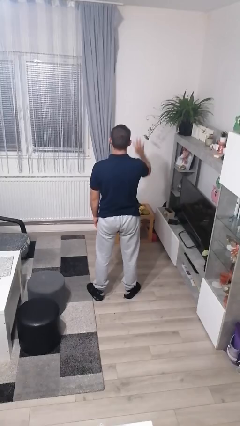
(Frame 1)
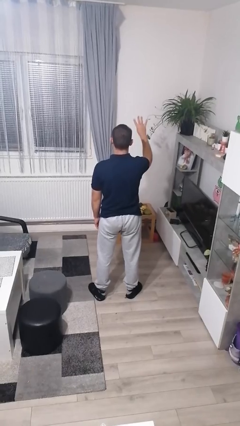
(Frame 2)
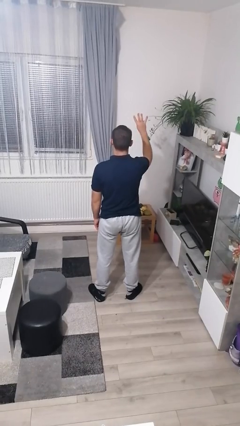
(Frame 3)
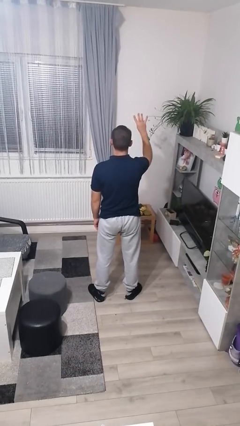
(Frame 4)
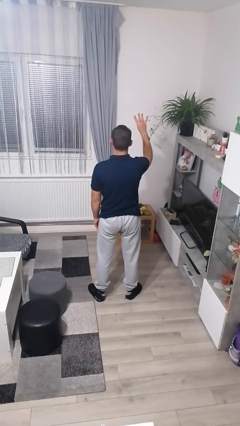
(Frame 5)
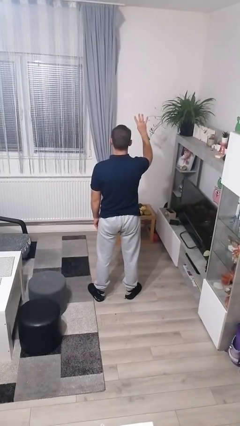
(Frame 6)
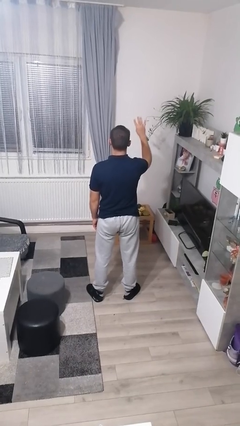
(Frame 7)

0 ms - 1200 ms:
person gestures number four

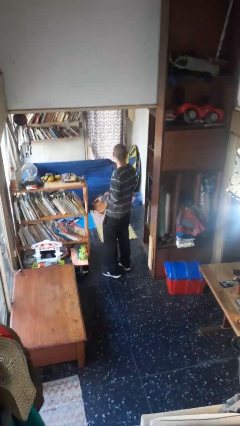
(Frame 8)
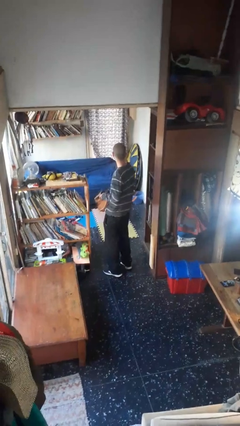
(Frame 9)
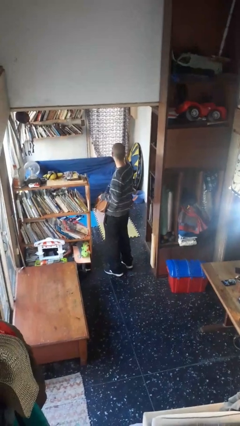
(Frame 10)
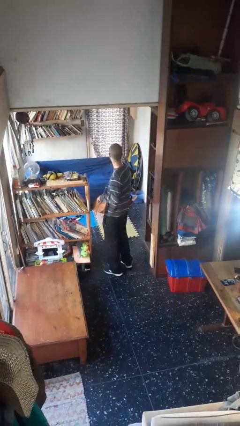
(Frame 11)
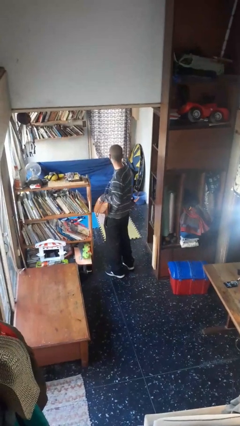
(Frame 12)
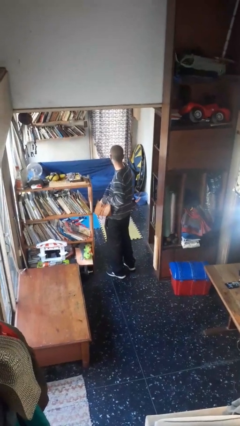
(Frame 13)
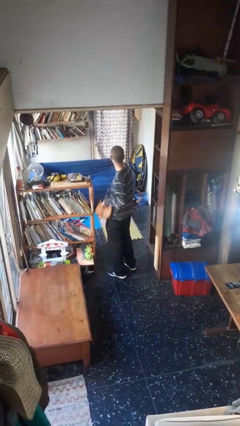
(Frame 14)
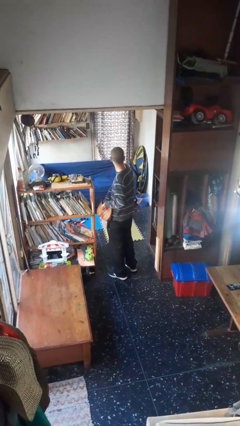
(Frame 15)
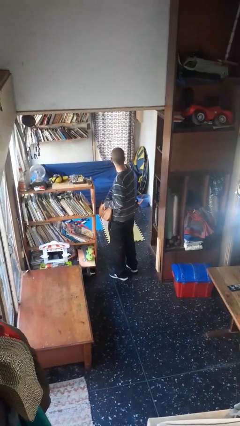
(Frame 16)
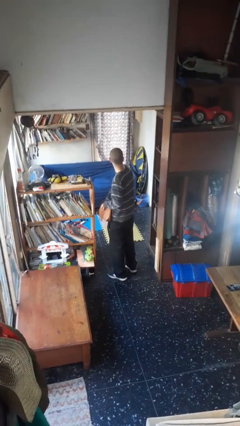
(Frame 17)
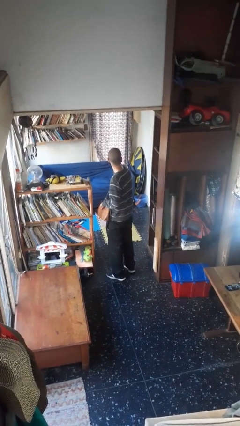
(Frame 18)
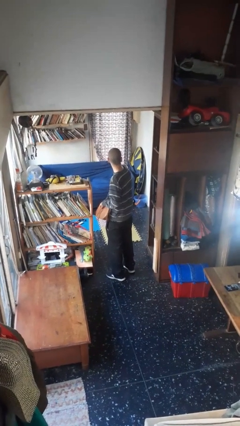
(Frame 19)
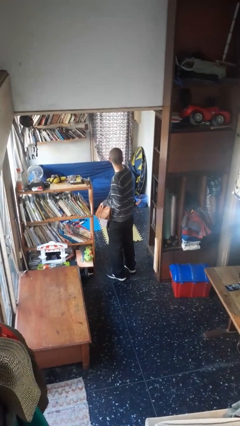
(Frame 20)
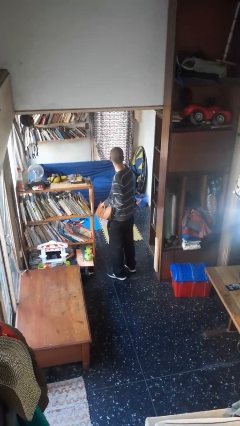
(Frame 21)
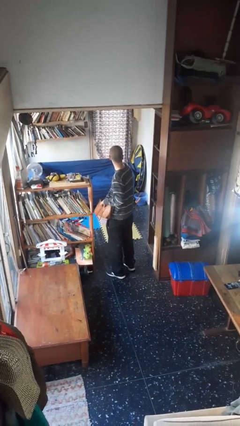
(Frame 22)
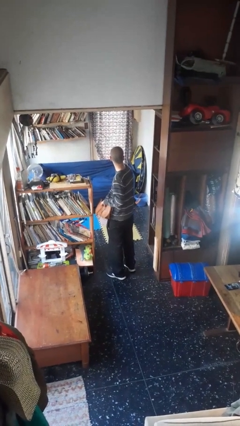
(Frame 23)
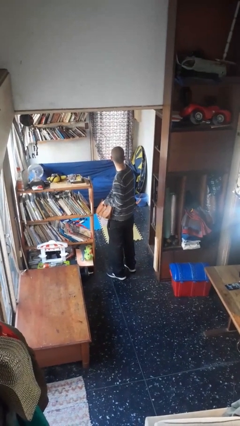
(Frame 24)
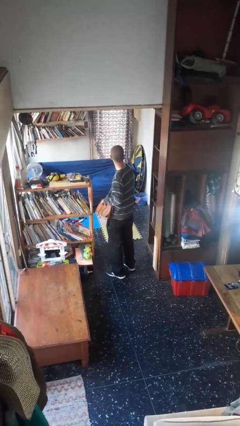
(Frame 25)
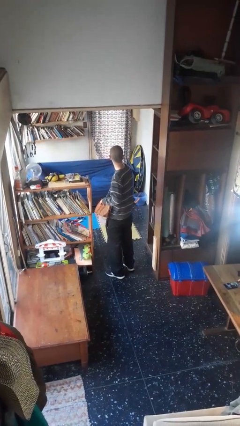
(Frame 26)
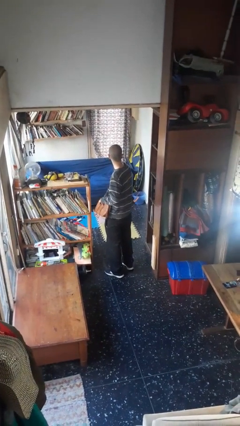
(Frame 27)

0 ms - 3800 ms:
person searches in purse

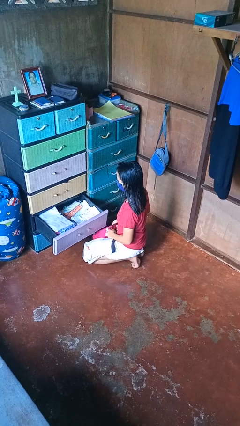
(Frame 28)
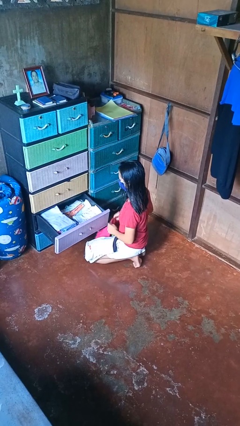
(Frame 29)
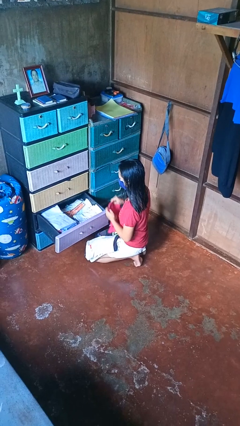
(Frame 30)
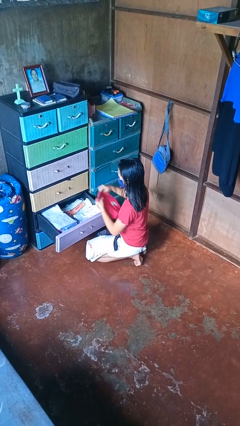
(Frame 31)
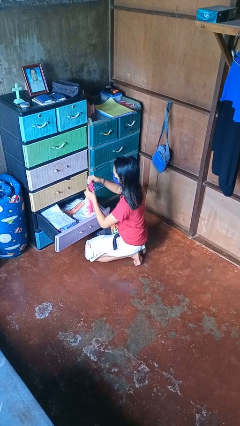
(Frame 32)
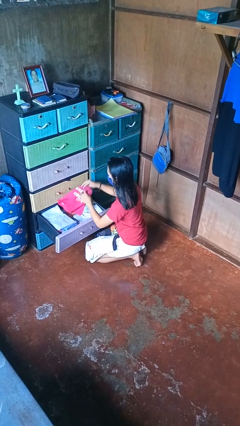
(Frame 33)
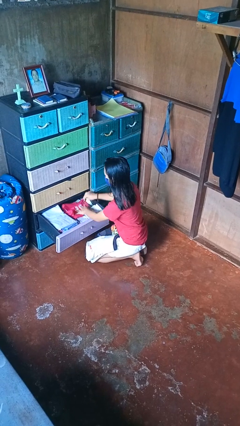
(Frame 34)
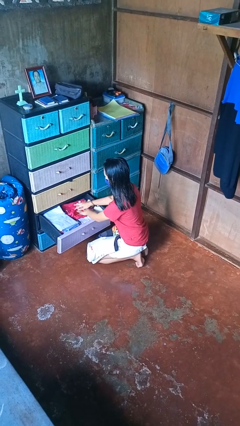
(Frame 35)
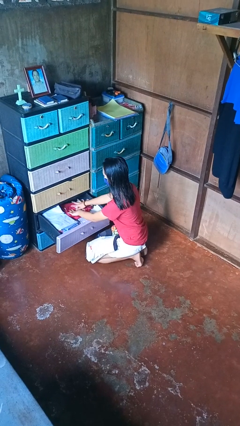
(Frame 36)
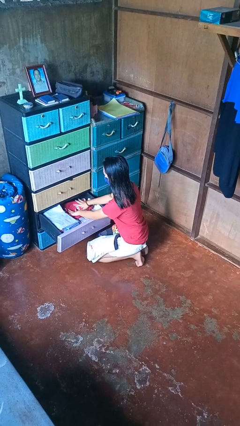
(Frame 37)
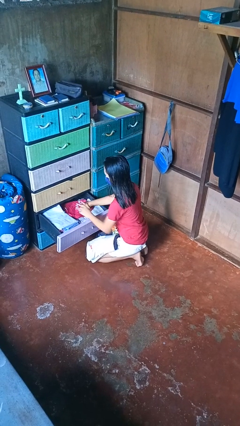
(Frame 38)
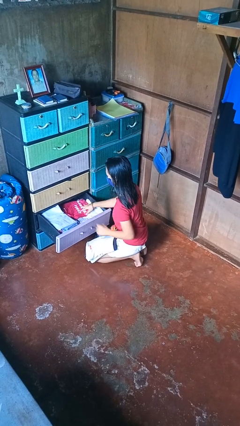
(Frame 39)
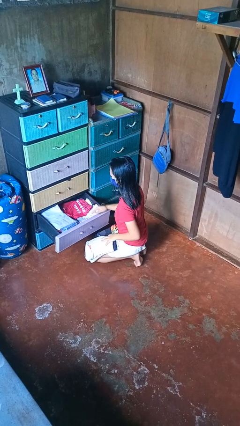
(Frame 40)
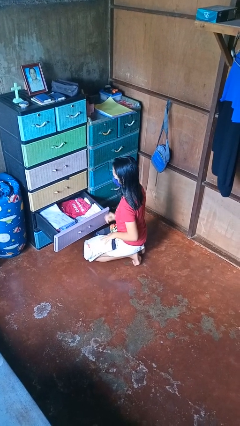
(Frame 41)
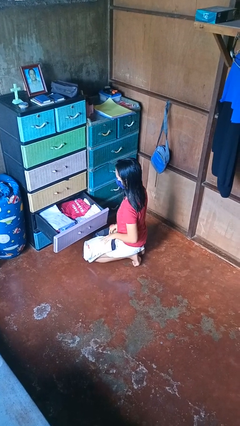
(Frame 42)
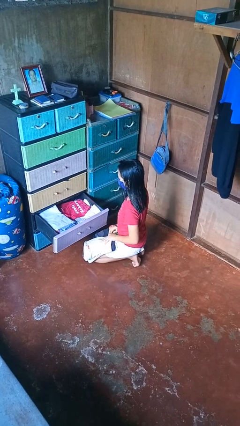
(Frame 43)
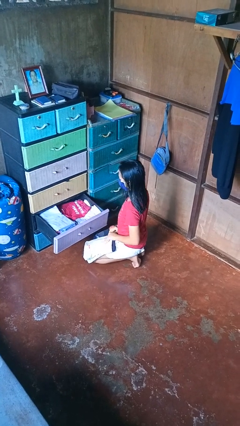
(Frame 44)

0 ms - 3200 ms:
person puts clothes into dresser

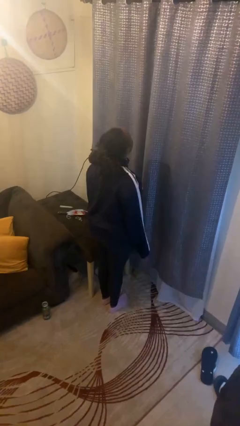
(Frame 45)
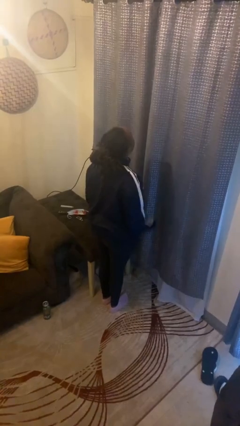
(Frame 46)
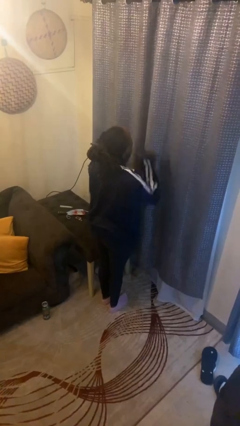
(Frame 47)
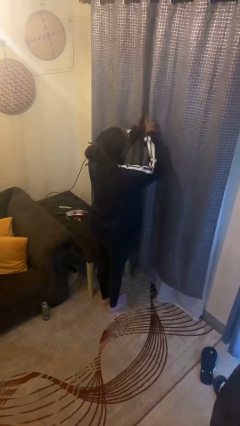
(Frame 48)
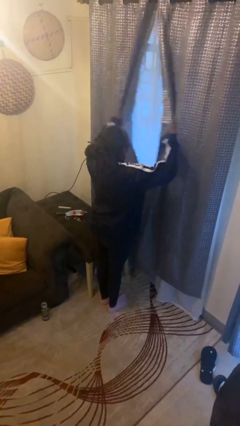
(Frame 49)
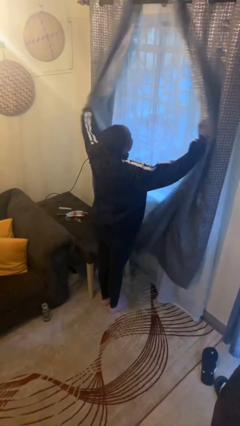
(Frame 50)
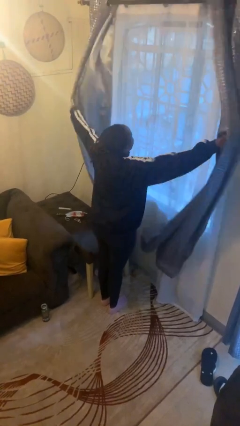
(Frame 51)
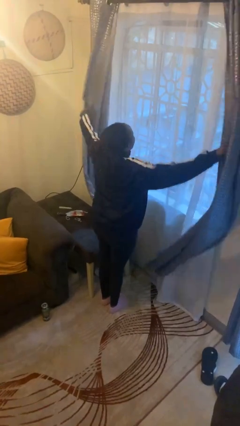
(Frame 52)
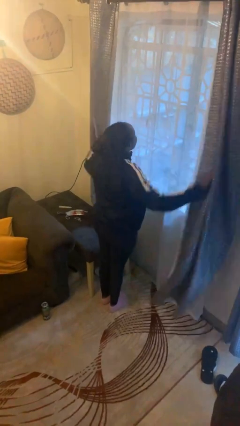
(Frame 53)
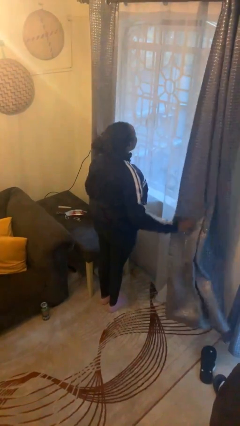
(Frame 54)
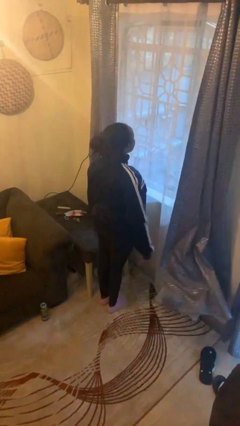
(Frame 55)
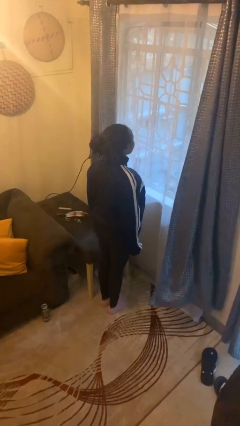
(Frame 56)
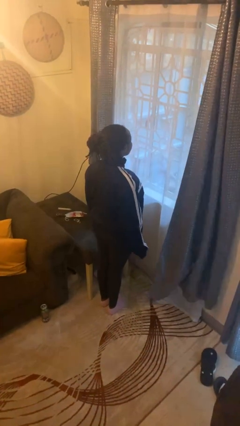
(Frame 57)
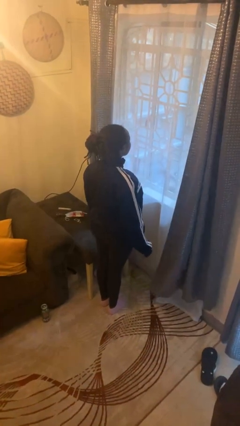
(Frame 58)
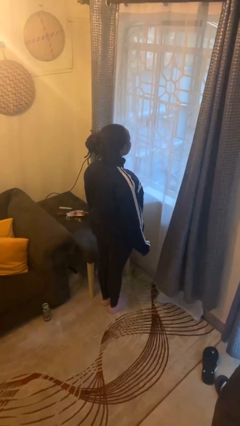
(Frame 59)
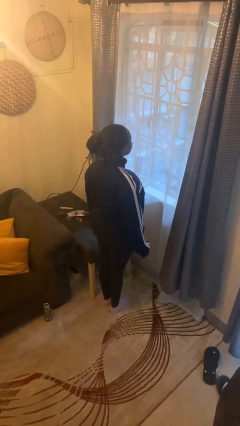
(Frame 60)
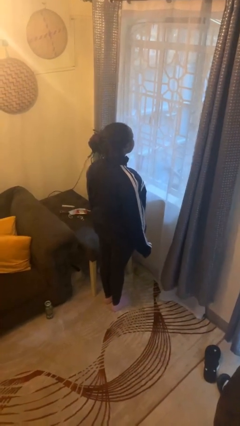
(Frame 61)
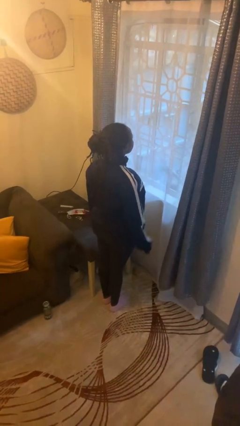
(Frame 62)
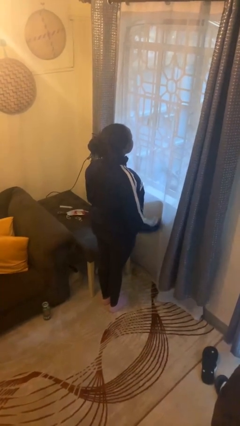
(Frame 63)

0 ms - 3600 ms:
person opens curtains

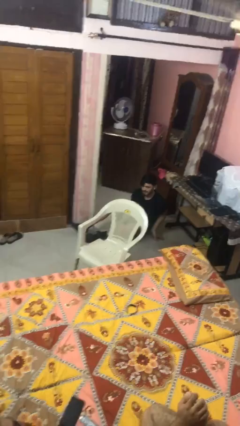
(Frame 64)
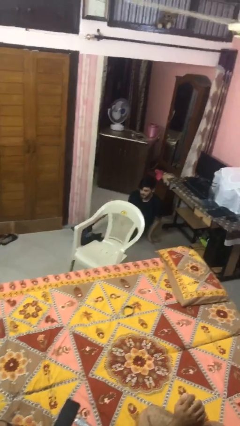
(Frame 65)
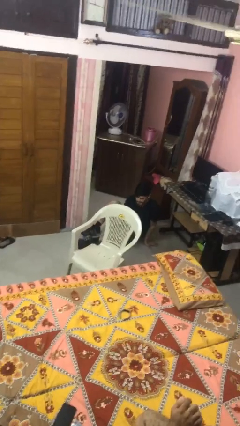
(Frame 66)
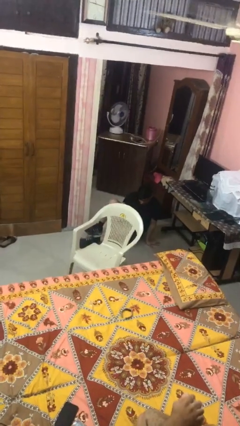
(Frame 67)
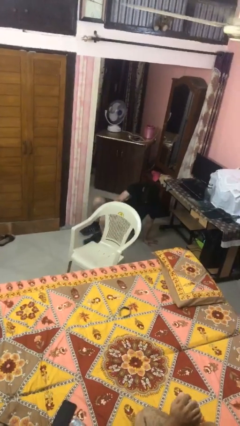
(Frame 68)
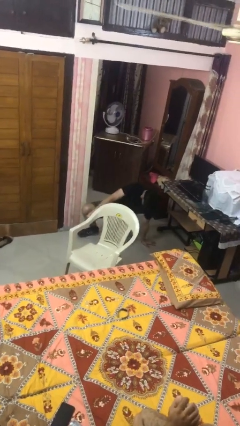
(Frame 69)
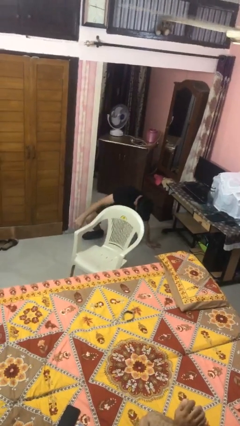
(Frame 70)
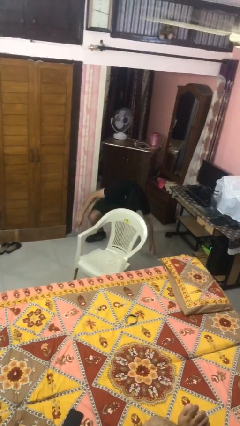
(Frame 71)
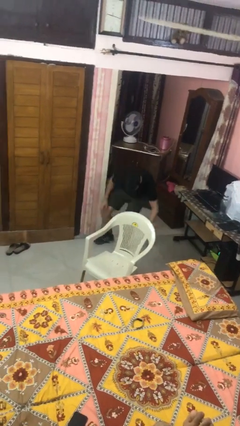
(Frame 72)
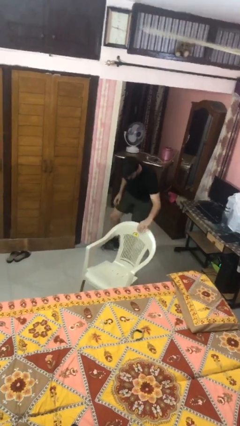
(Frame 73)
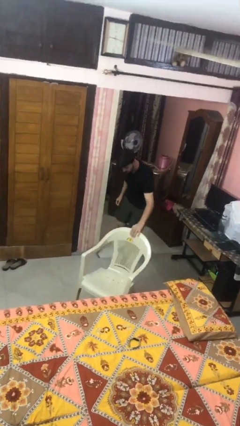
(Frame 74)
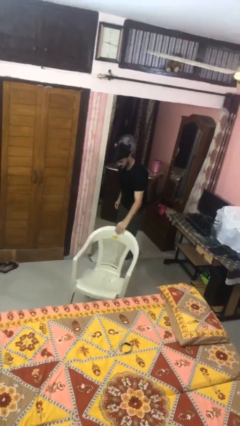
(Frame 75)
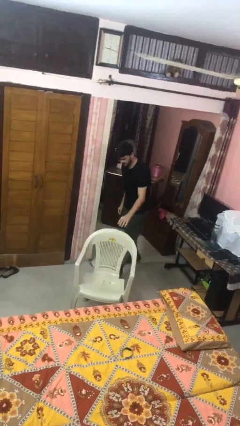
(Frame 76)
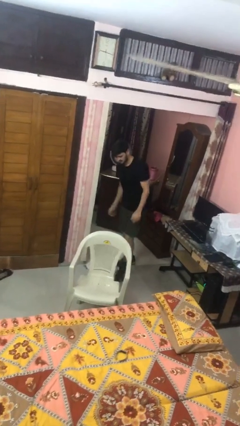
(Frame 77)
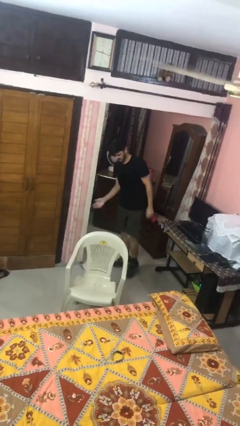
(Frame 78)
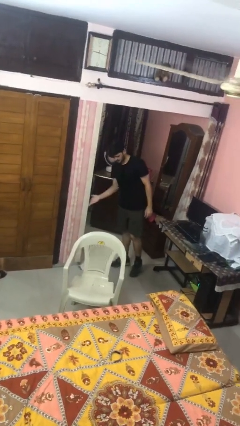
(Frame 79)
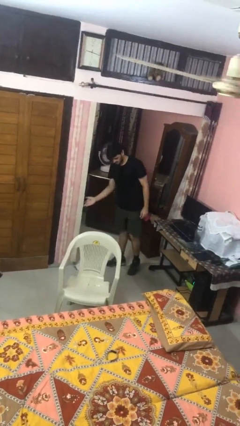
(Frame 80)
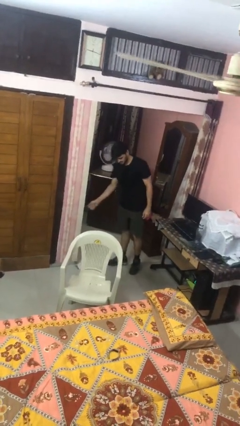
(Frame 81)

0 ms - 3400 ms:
person stands up from floor

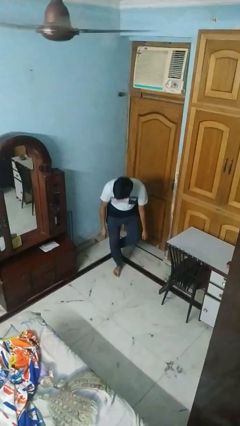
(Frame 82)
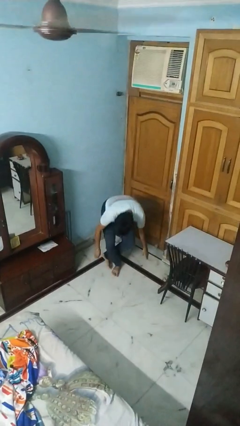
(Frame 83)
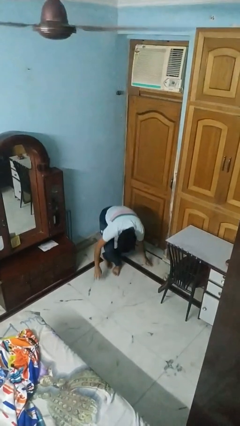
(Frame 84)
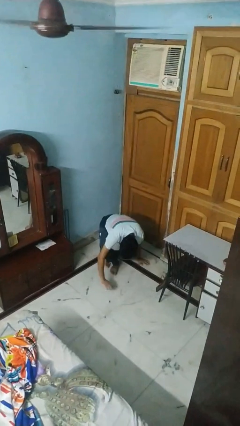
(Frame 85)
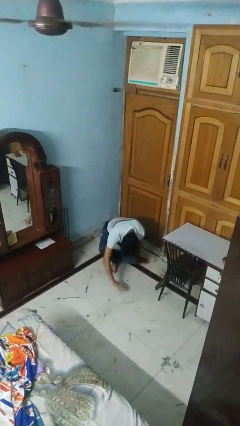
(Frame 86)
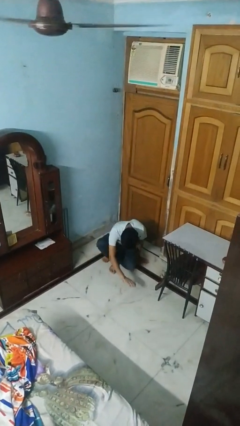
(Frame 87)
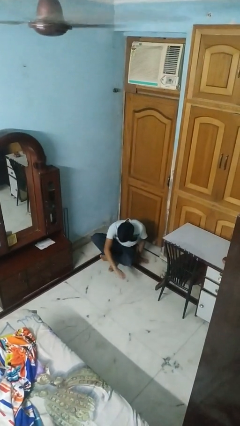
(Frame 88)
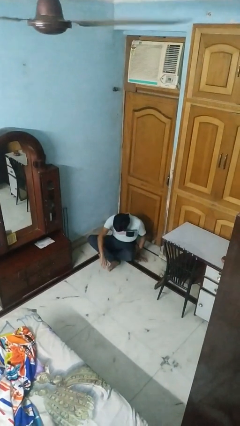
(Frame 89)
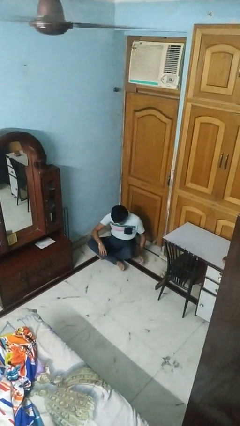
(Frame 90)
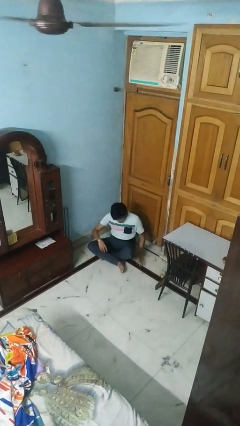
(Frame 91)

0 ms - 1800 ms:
person sits crisscross

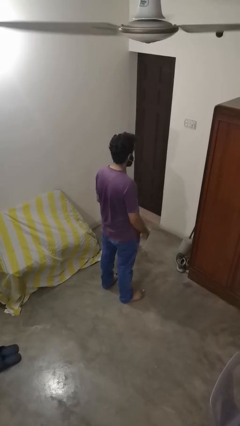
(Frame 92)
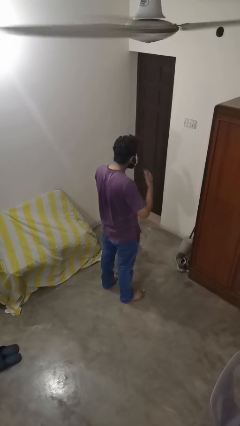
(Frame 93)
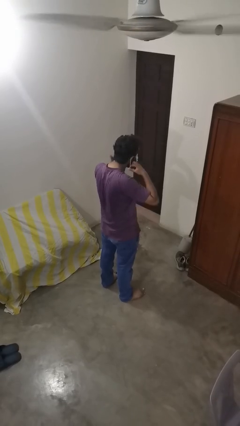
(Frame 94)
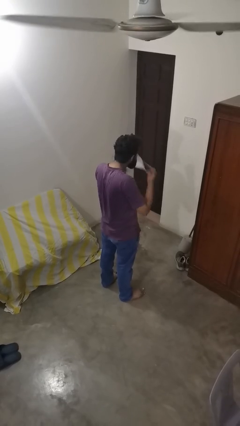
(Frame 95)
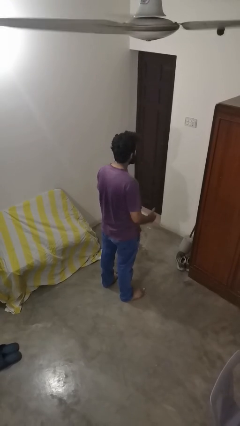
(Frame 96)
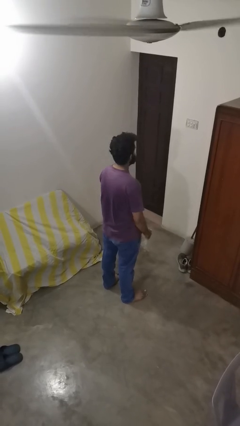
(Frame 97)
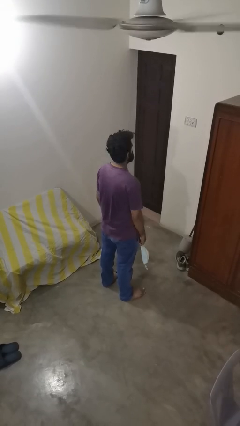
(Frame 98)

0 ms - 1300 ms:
person takes off facemask
